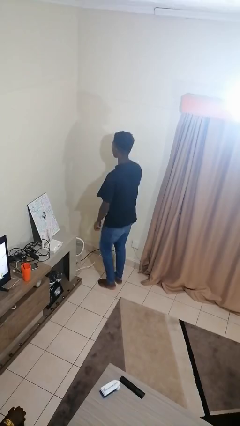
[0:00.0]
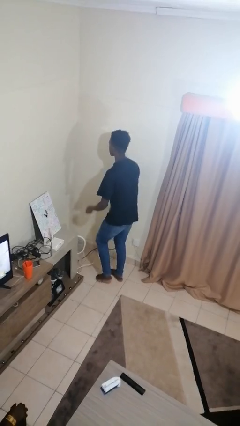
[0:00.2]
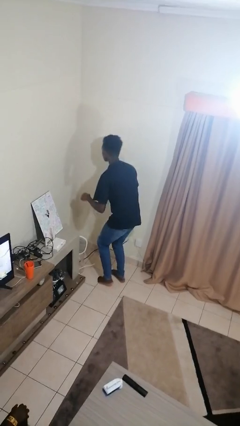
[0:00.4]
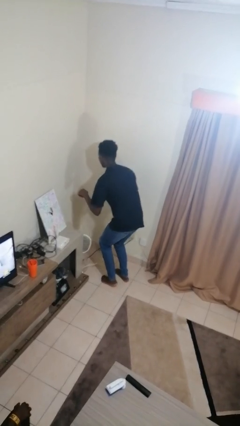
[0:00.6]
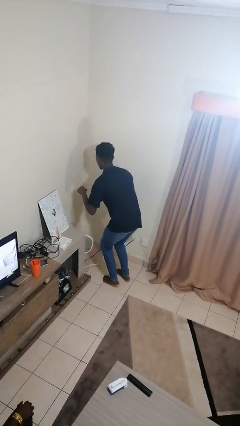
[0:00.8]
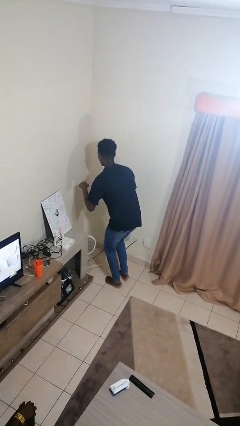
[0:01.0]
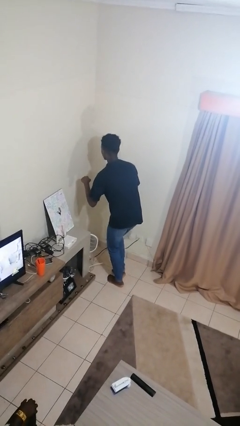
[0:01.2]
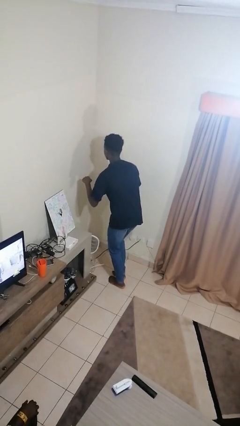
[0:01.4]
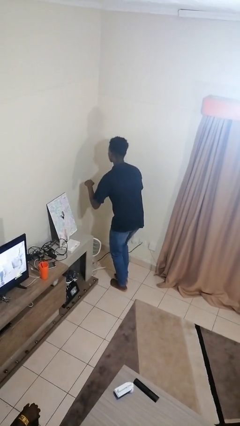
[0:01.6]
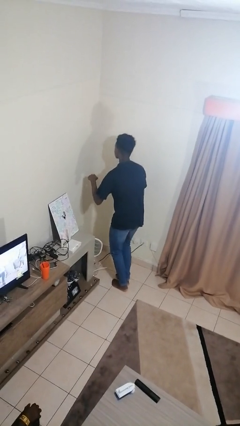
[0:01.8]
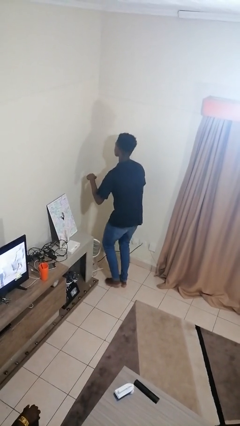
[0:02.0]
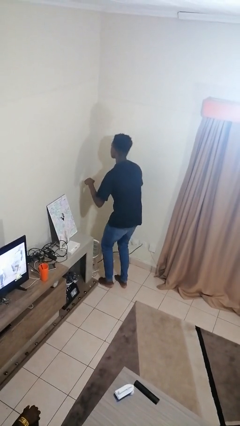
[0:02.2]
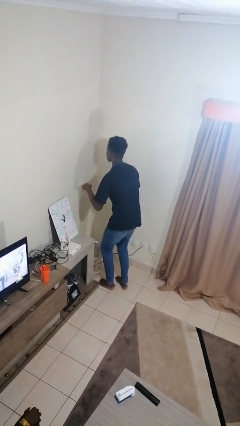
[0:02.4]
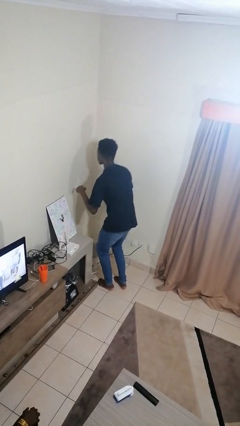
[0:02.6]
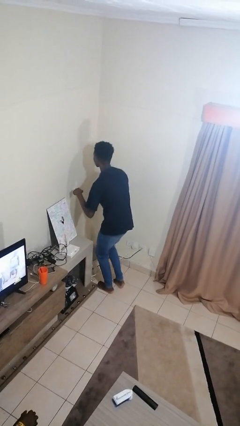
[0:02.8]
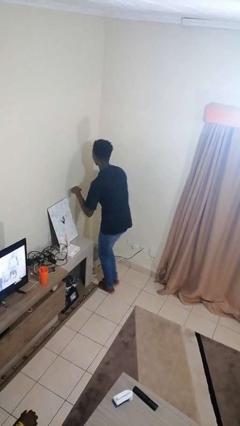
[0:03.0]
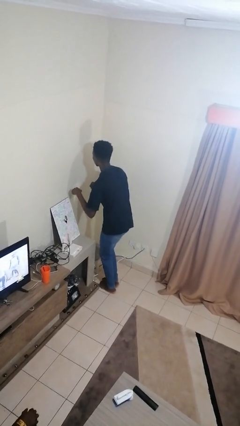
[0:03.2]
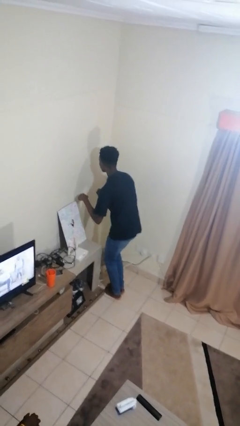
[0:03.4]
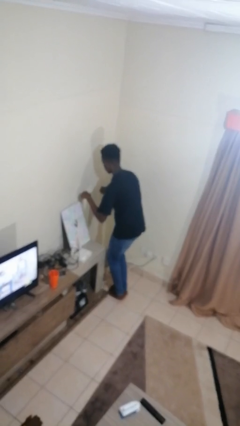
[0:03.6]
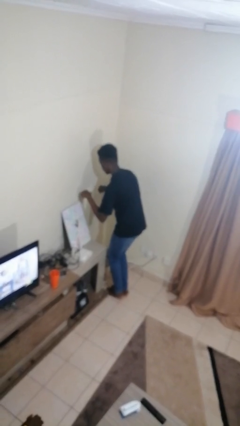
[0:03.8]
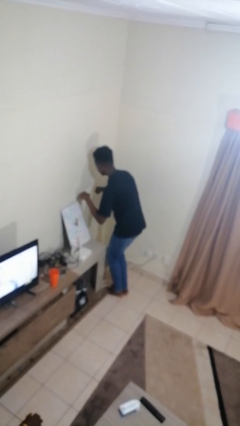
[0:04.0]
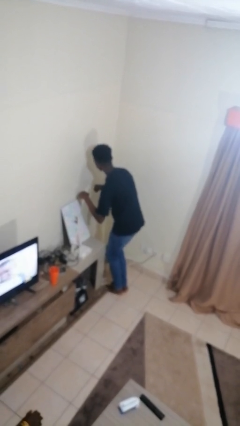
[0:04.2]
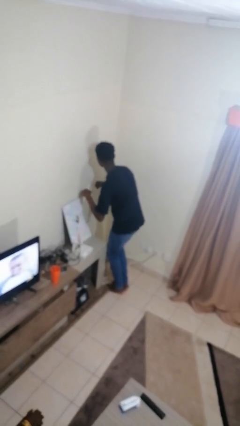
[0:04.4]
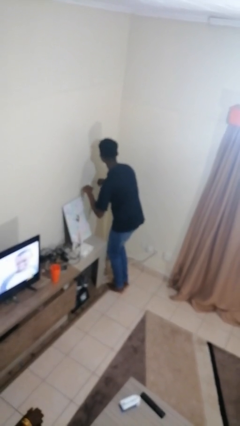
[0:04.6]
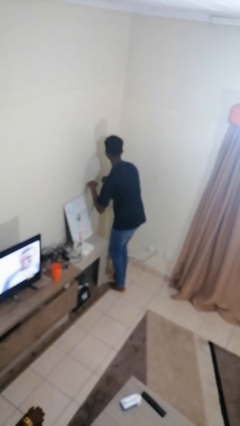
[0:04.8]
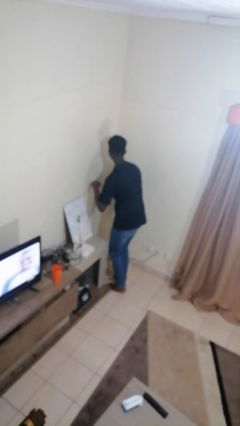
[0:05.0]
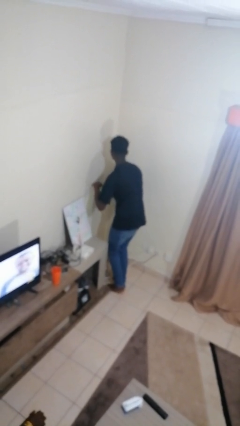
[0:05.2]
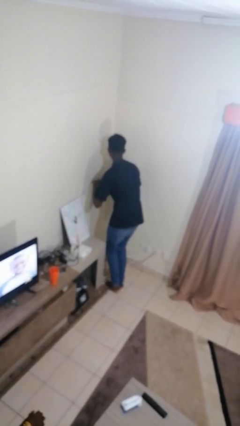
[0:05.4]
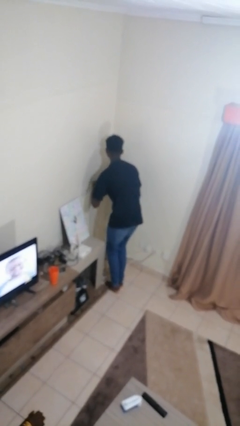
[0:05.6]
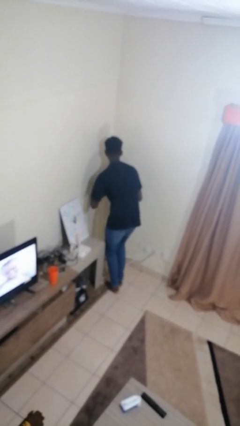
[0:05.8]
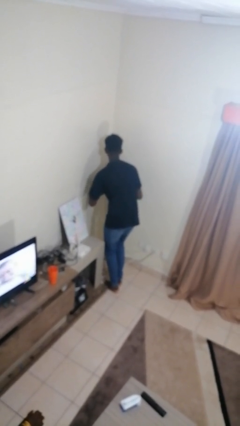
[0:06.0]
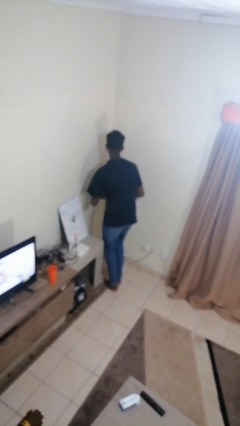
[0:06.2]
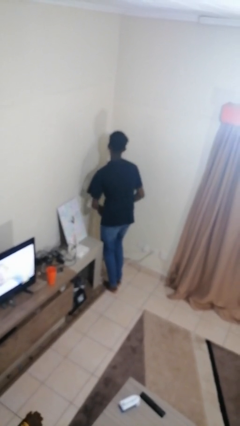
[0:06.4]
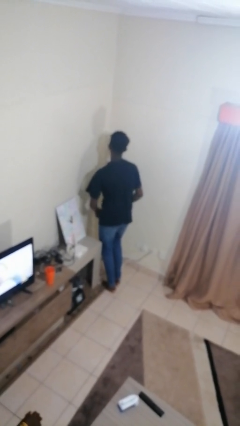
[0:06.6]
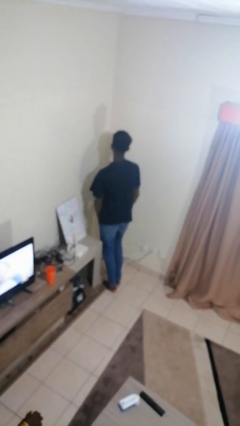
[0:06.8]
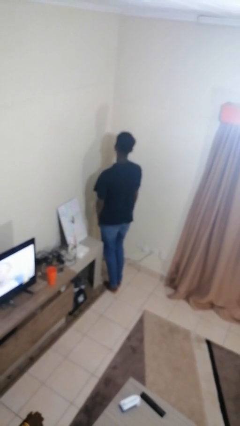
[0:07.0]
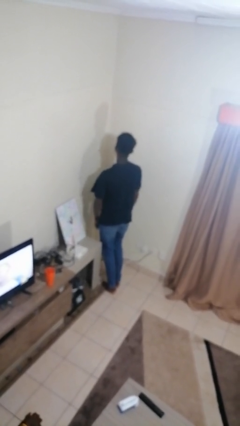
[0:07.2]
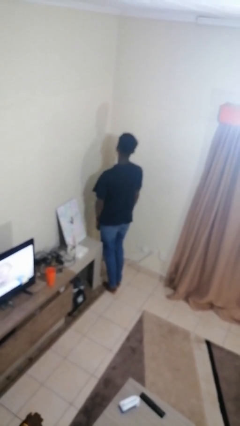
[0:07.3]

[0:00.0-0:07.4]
person walks tiptoe

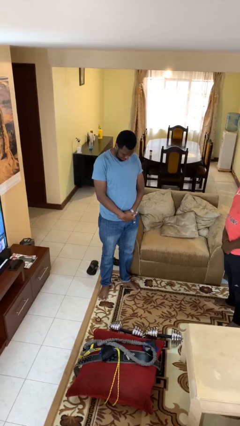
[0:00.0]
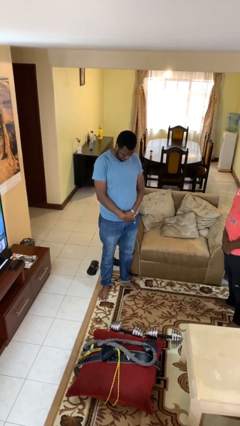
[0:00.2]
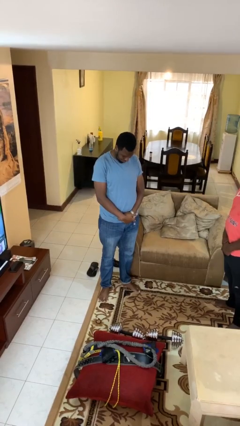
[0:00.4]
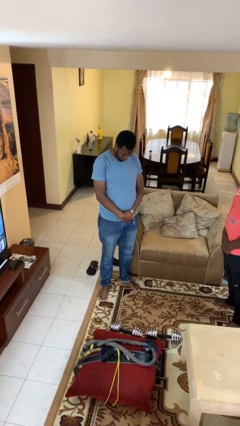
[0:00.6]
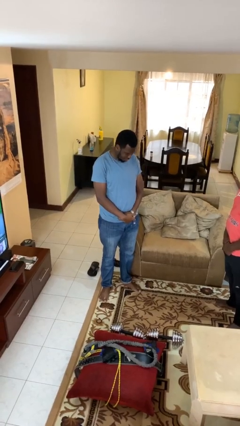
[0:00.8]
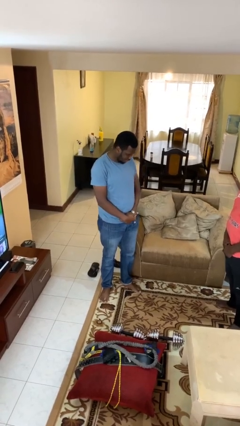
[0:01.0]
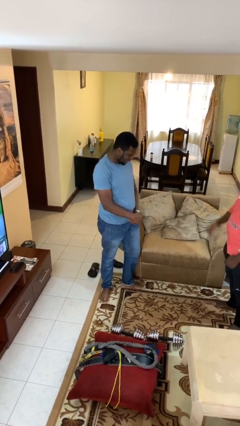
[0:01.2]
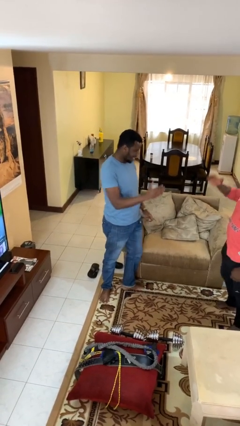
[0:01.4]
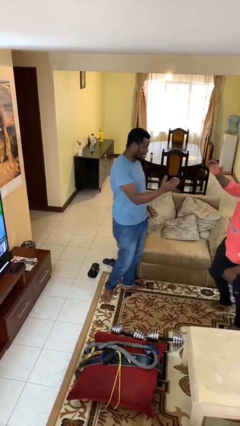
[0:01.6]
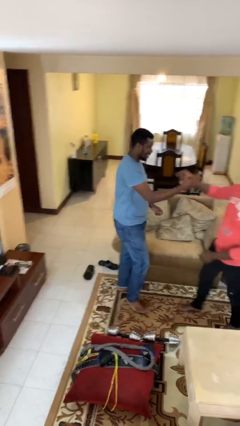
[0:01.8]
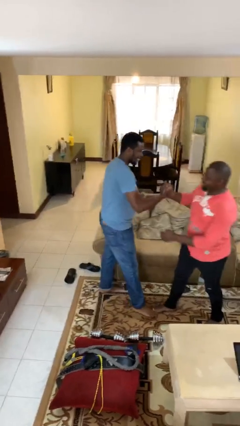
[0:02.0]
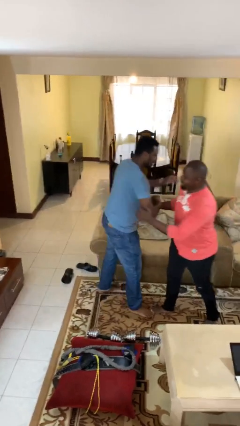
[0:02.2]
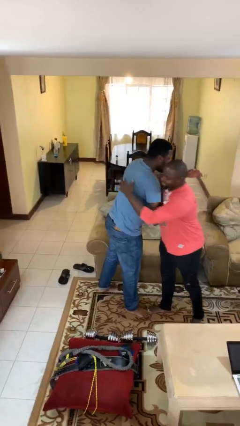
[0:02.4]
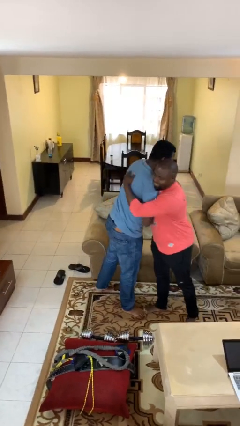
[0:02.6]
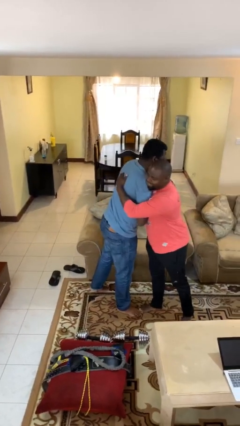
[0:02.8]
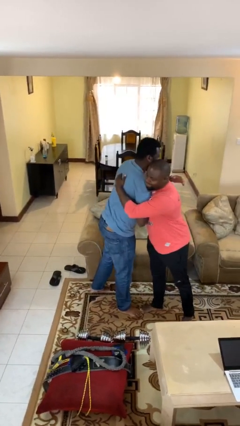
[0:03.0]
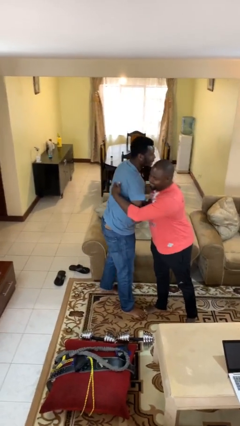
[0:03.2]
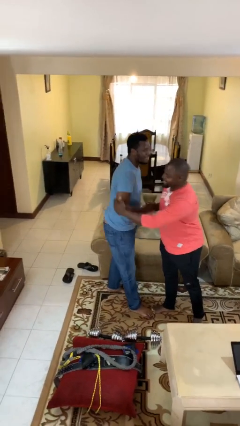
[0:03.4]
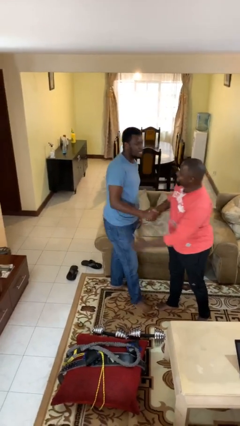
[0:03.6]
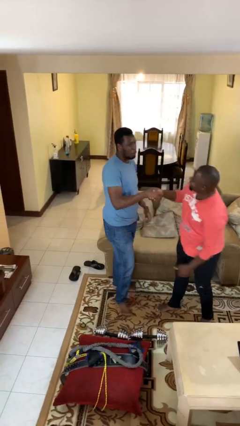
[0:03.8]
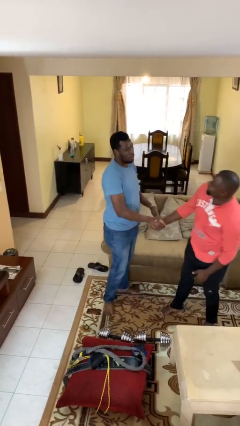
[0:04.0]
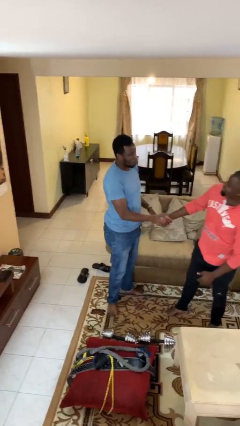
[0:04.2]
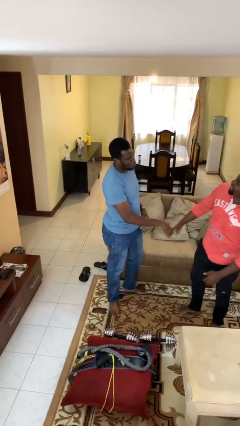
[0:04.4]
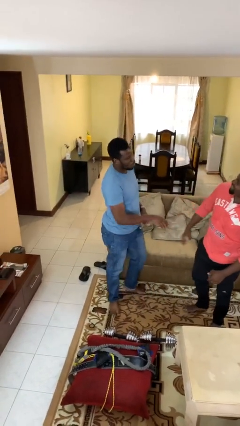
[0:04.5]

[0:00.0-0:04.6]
person embraces person

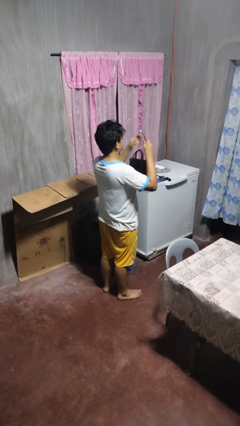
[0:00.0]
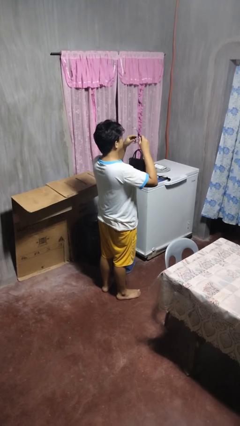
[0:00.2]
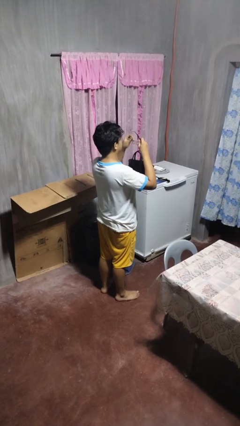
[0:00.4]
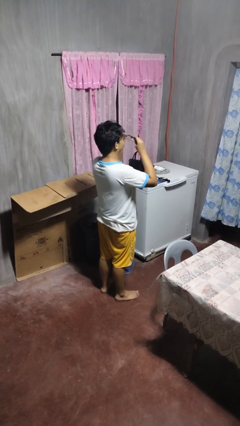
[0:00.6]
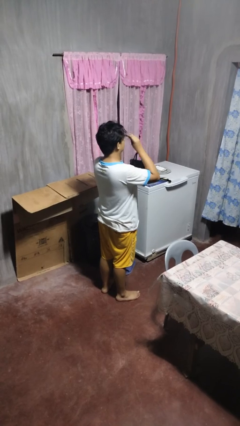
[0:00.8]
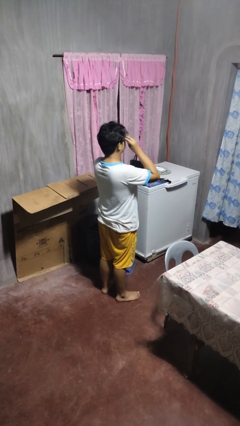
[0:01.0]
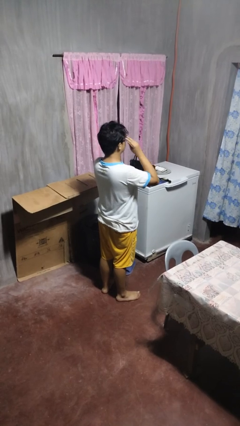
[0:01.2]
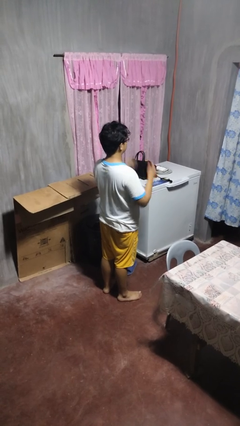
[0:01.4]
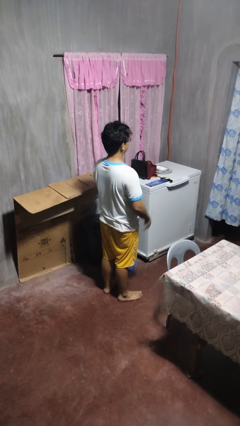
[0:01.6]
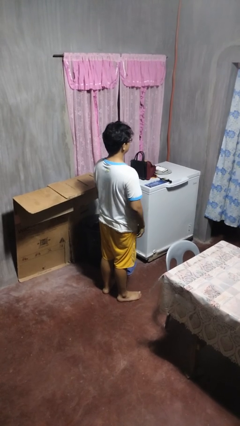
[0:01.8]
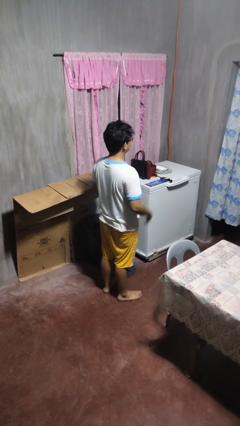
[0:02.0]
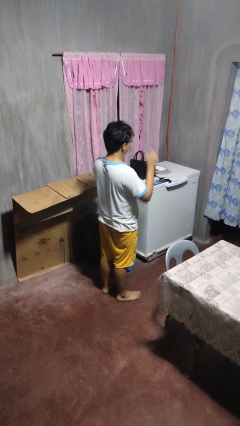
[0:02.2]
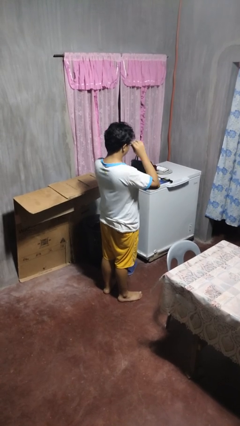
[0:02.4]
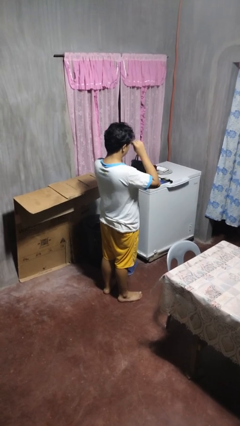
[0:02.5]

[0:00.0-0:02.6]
person puts on glasses

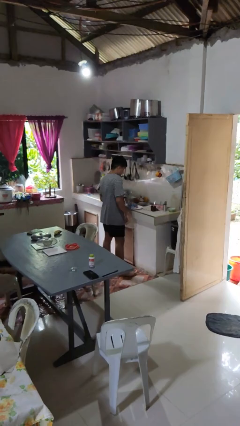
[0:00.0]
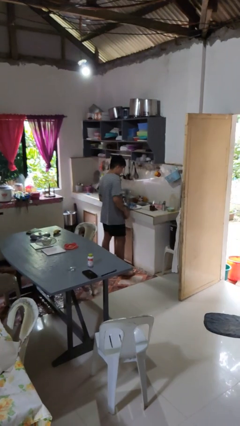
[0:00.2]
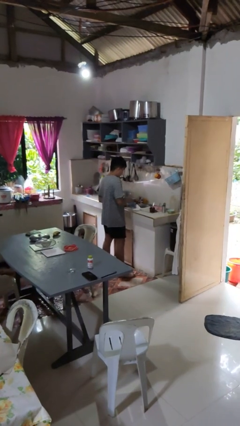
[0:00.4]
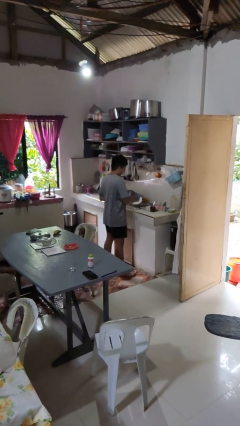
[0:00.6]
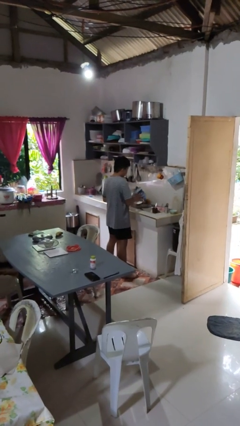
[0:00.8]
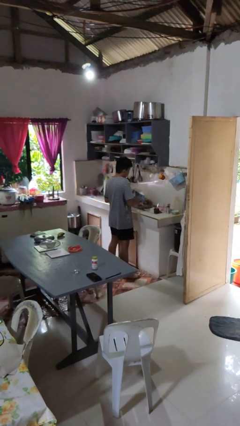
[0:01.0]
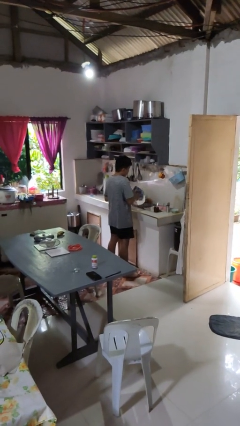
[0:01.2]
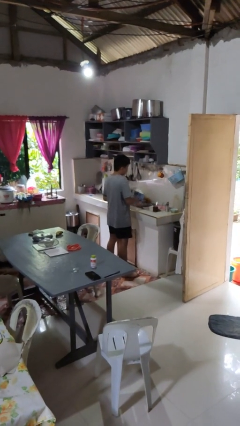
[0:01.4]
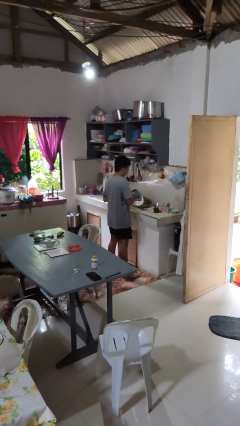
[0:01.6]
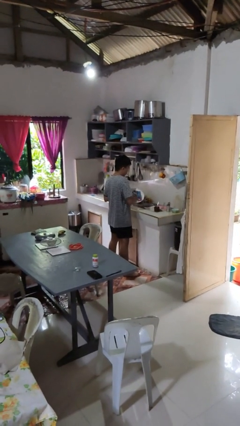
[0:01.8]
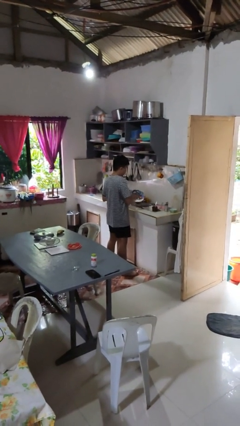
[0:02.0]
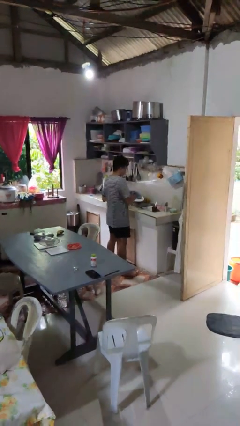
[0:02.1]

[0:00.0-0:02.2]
person dries dish

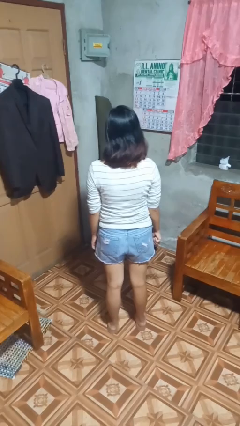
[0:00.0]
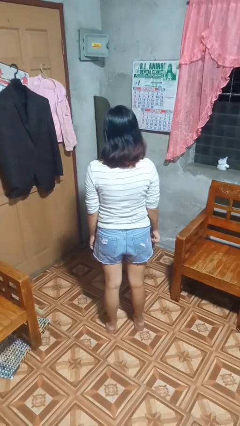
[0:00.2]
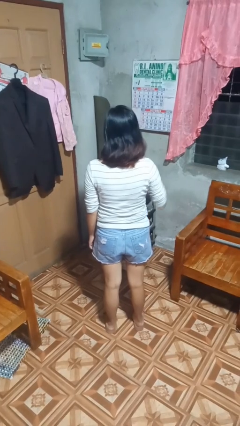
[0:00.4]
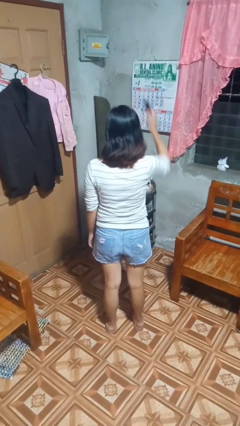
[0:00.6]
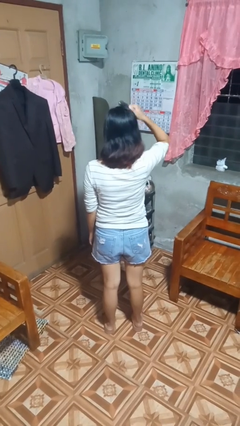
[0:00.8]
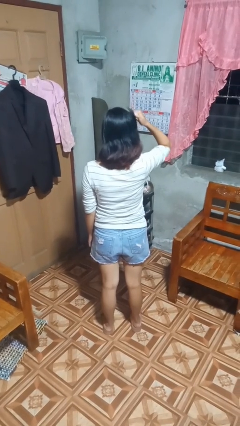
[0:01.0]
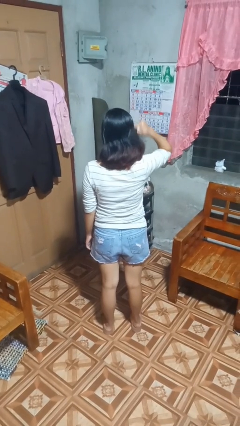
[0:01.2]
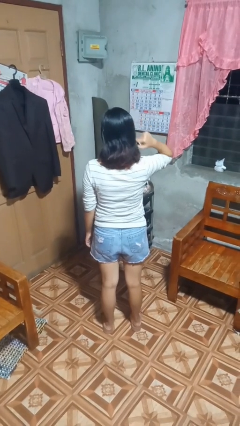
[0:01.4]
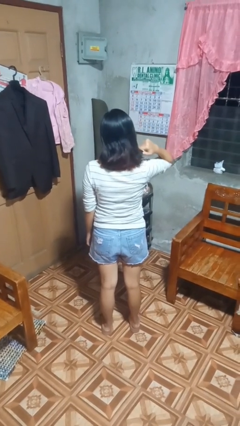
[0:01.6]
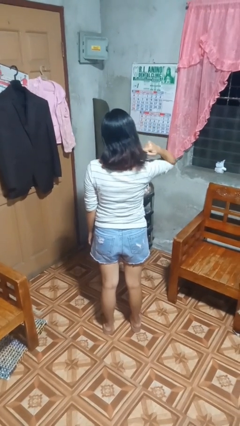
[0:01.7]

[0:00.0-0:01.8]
person brushes hair
